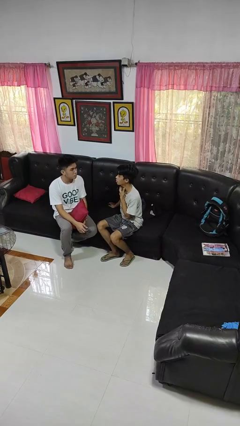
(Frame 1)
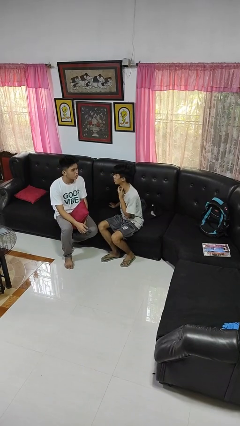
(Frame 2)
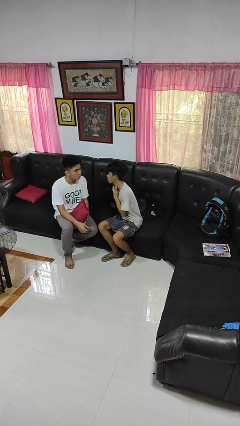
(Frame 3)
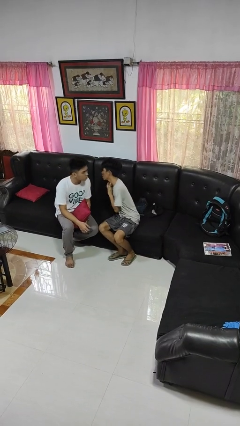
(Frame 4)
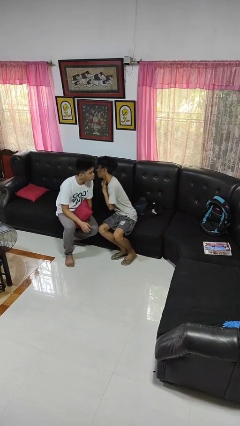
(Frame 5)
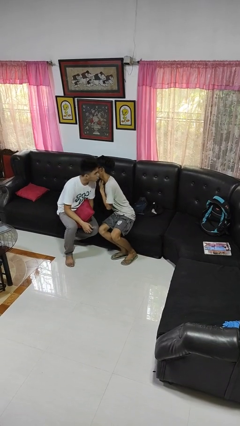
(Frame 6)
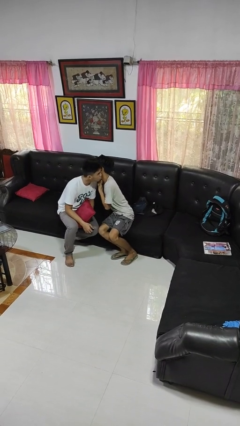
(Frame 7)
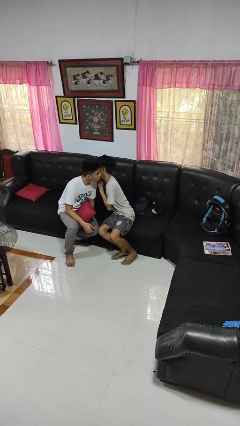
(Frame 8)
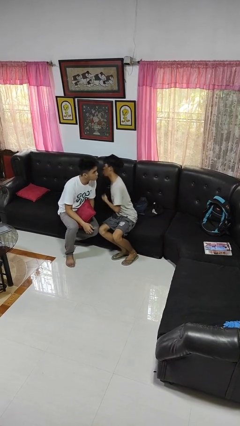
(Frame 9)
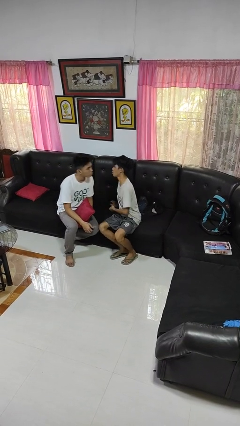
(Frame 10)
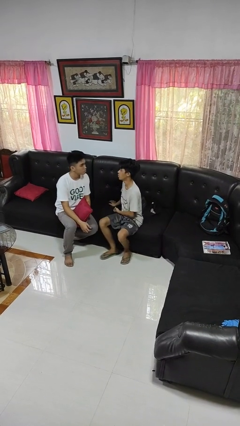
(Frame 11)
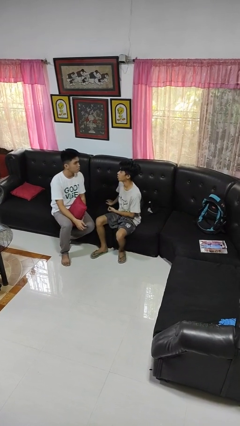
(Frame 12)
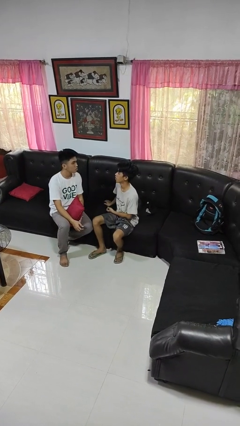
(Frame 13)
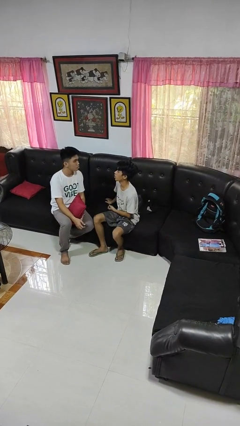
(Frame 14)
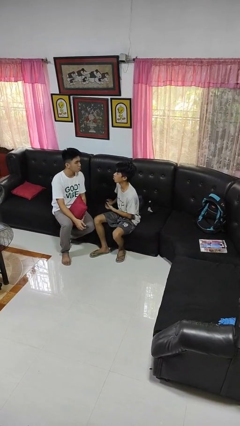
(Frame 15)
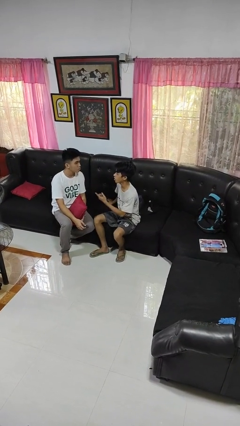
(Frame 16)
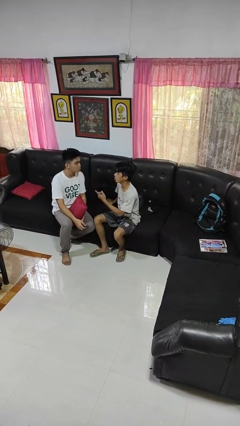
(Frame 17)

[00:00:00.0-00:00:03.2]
person kisses cheek of person

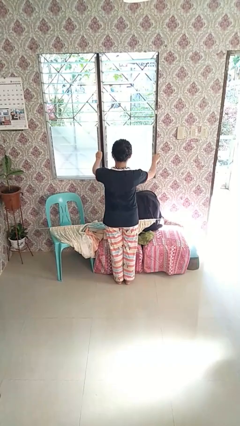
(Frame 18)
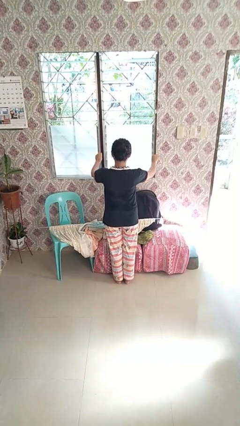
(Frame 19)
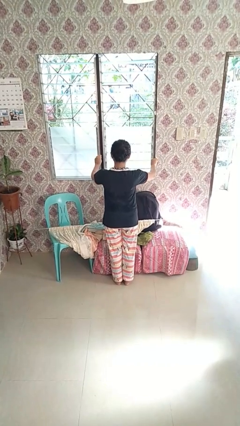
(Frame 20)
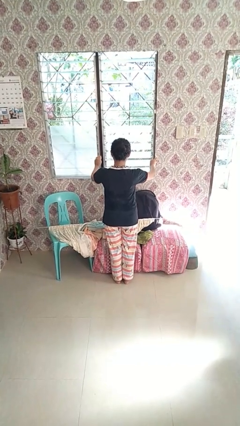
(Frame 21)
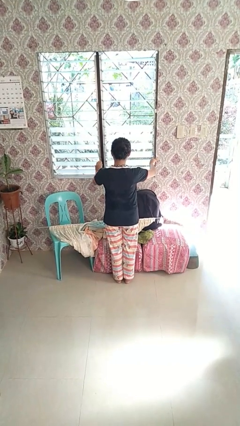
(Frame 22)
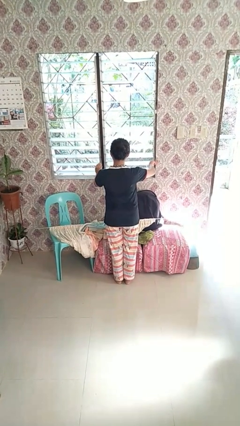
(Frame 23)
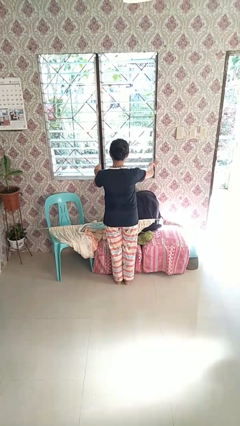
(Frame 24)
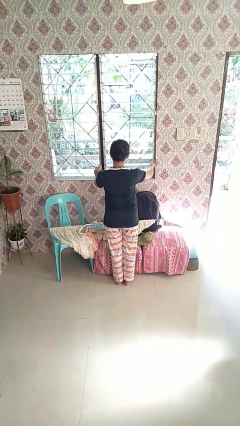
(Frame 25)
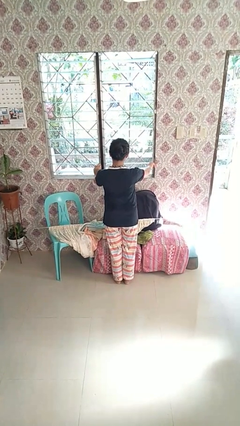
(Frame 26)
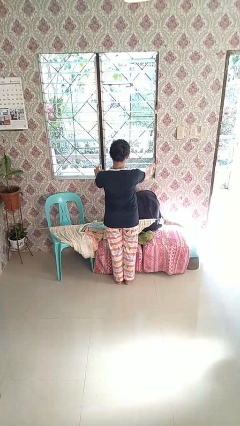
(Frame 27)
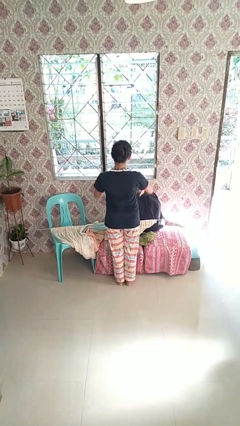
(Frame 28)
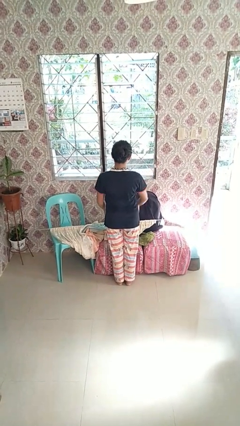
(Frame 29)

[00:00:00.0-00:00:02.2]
person opens home window

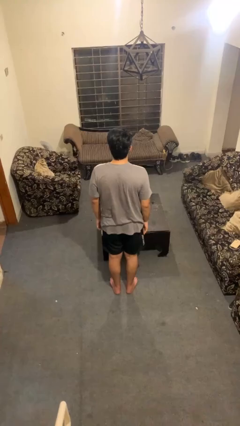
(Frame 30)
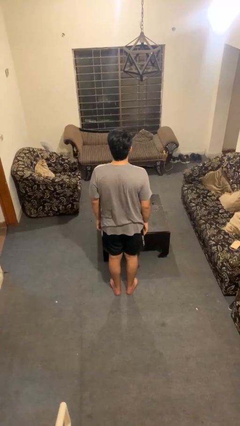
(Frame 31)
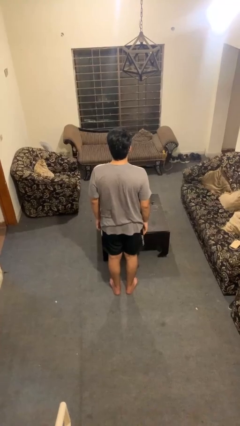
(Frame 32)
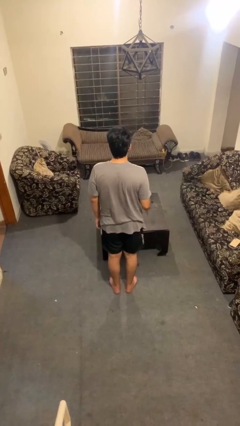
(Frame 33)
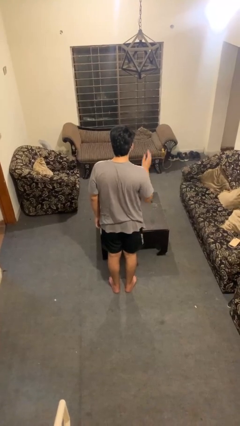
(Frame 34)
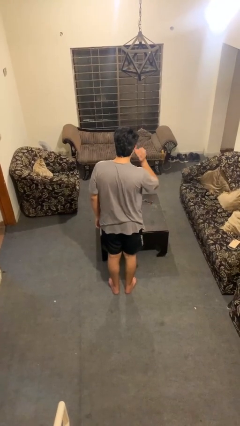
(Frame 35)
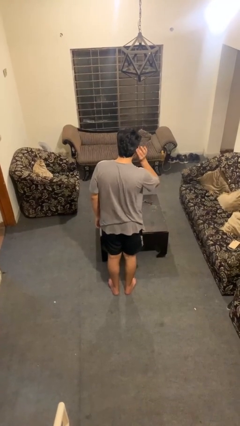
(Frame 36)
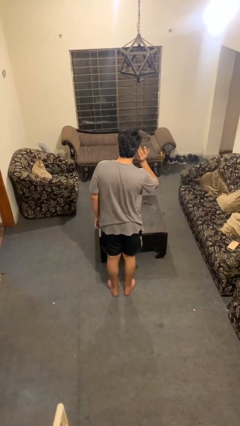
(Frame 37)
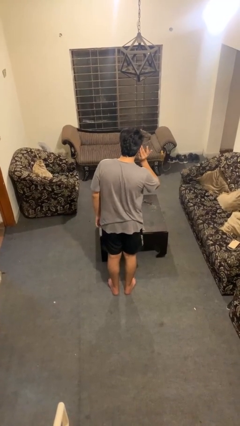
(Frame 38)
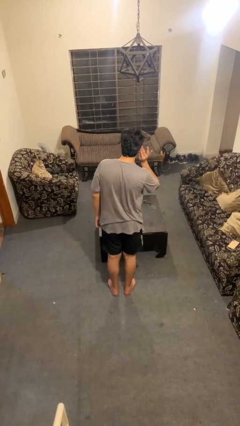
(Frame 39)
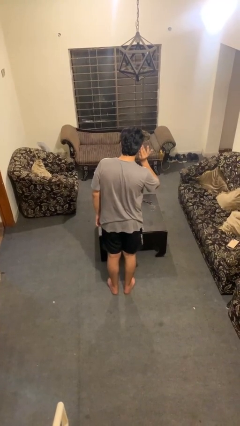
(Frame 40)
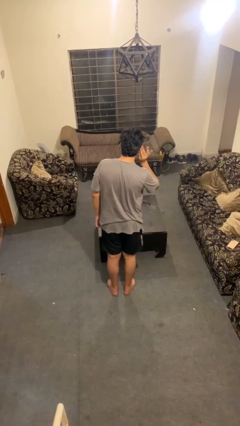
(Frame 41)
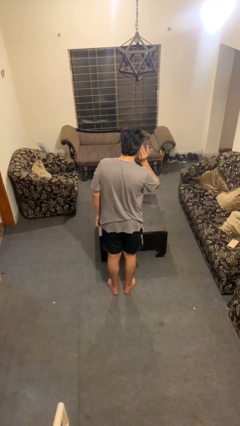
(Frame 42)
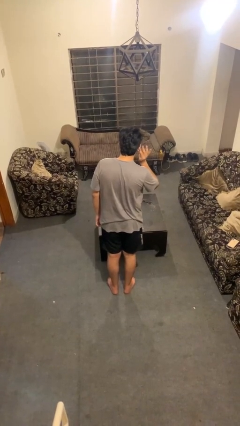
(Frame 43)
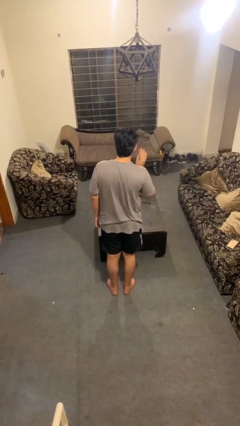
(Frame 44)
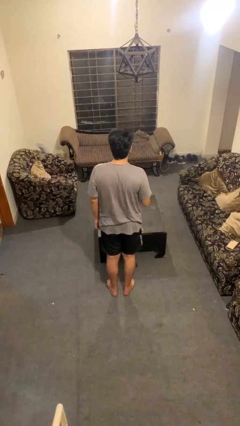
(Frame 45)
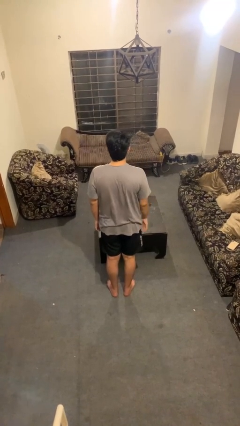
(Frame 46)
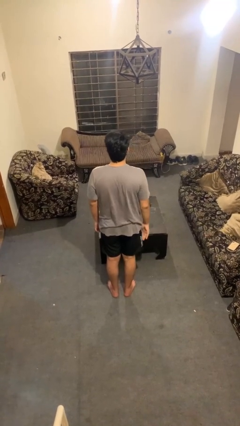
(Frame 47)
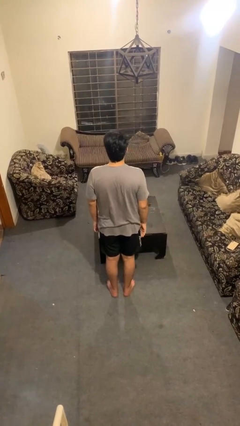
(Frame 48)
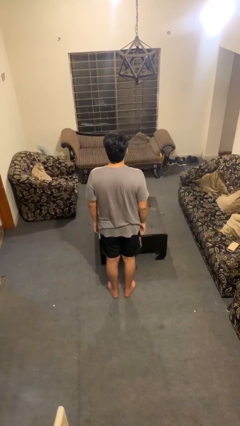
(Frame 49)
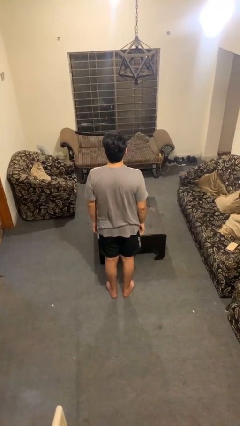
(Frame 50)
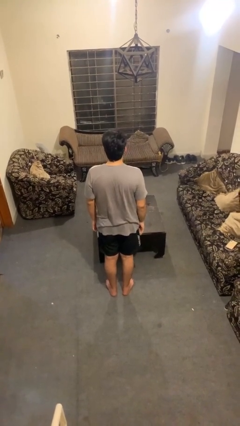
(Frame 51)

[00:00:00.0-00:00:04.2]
person gestures listen closely

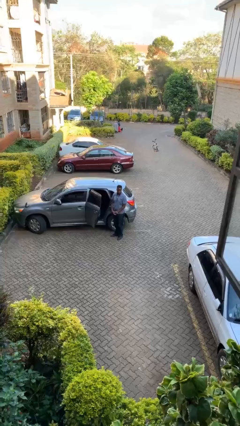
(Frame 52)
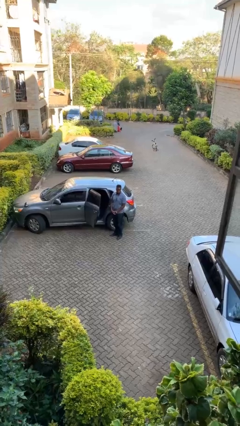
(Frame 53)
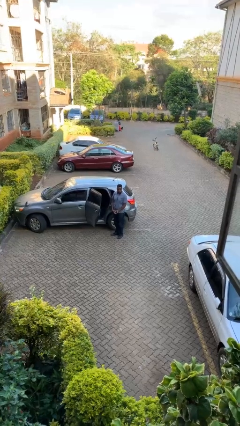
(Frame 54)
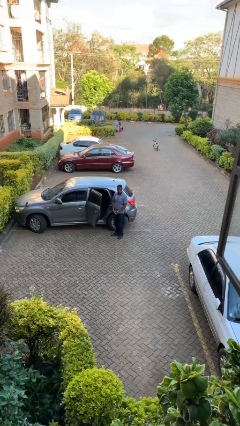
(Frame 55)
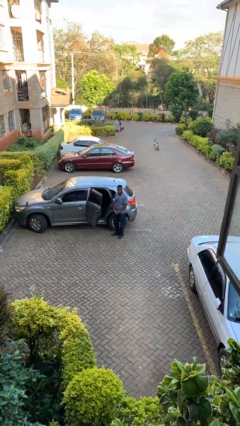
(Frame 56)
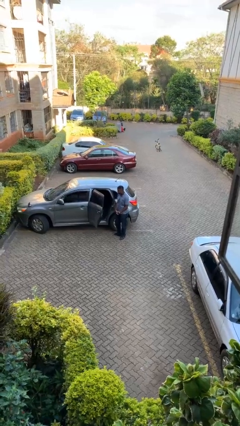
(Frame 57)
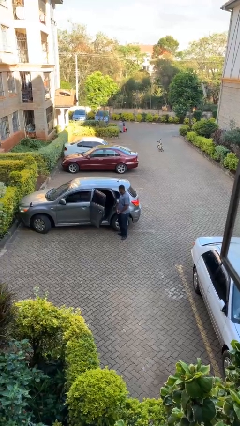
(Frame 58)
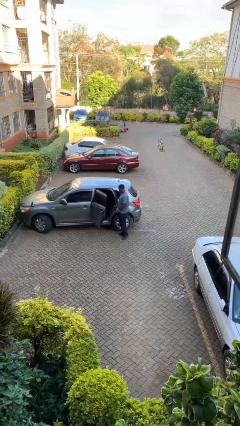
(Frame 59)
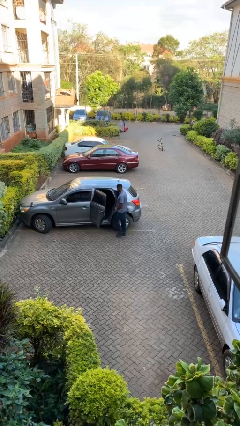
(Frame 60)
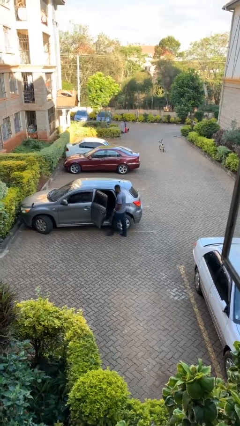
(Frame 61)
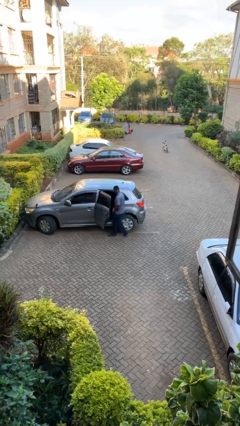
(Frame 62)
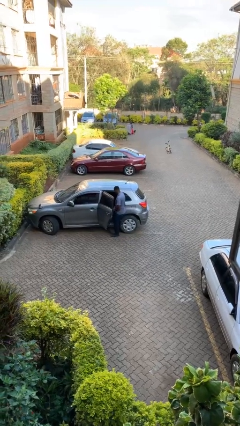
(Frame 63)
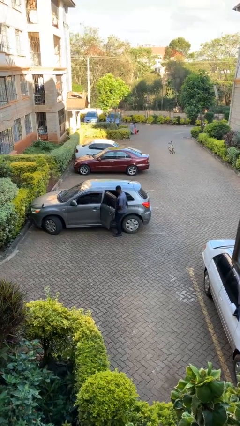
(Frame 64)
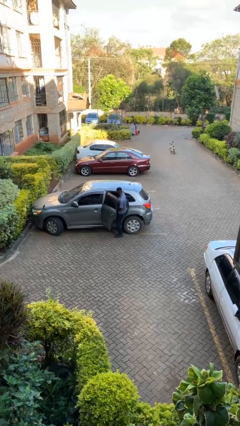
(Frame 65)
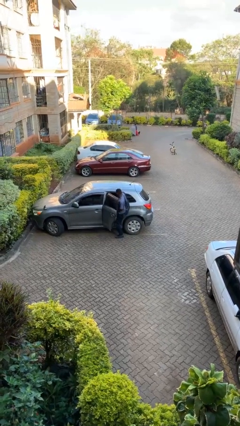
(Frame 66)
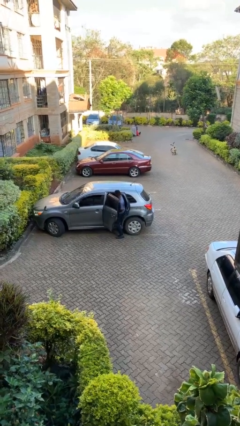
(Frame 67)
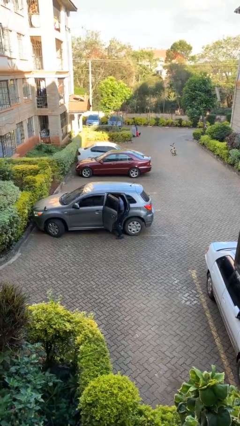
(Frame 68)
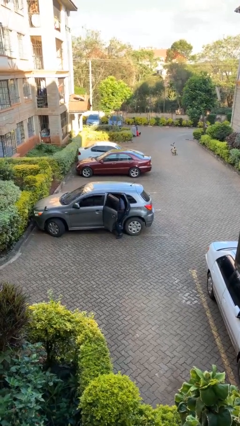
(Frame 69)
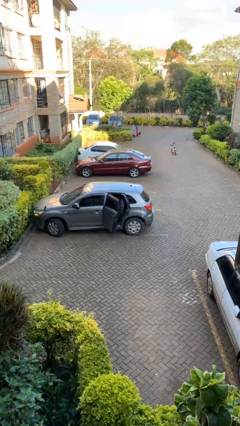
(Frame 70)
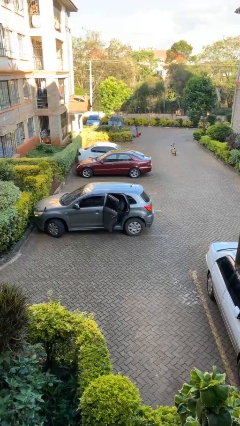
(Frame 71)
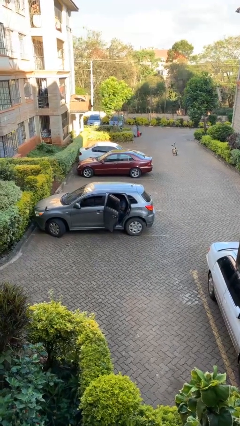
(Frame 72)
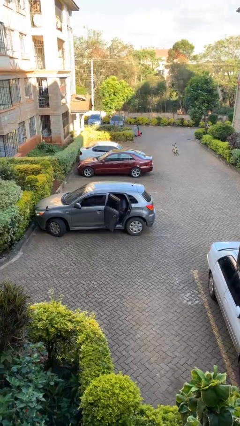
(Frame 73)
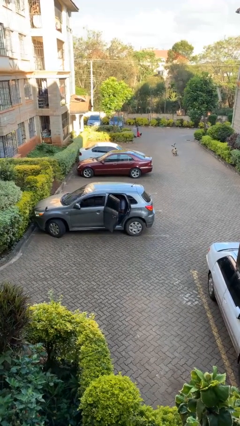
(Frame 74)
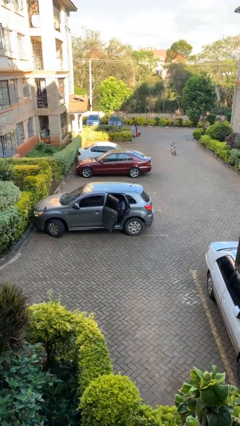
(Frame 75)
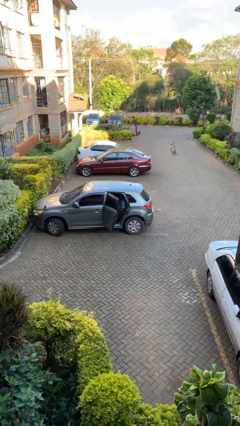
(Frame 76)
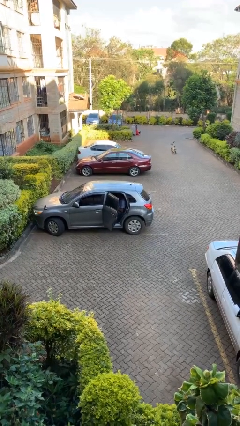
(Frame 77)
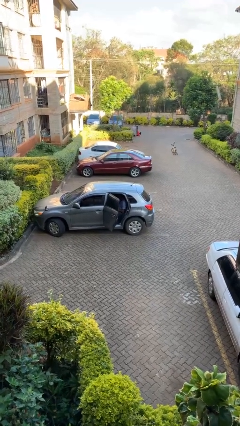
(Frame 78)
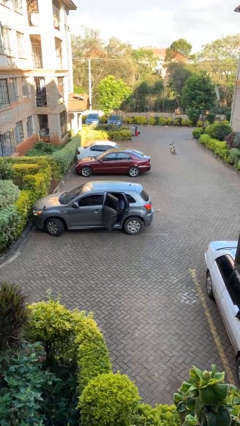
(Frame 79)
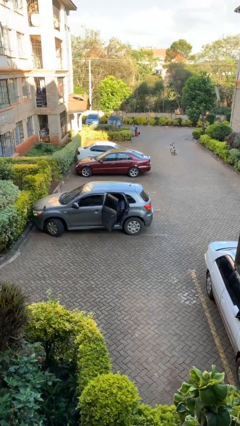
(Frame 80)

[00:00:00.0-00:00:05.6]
person enters car

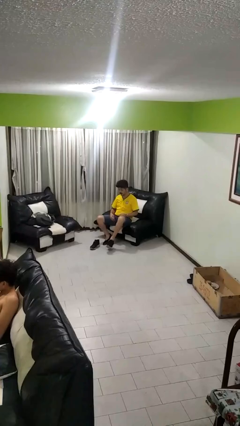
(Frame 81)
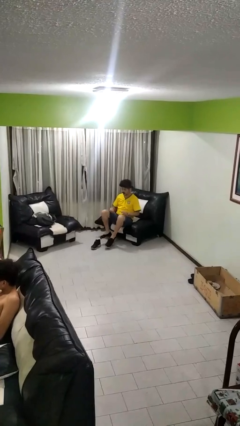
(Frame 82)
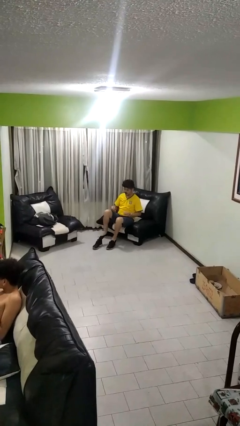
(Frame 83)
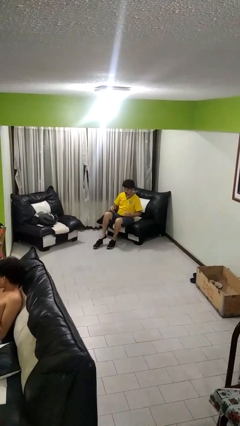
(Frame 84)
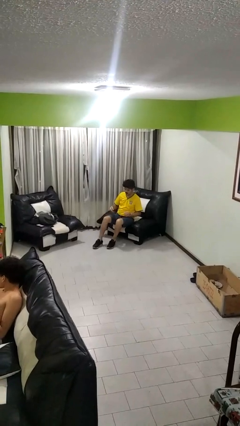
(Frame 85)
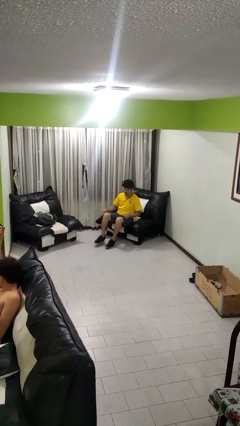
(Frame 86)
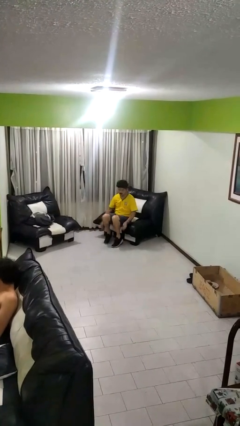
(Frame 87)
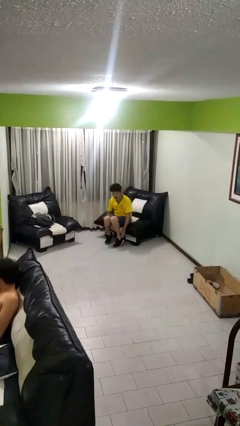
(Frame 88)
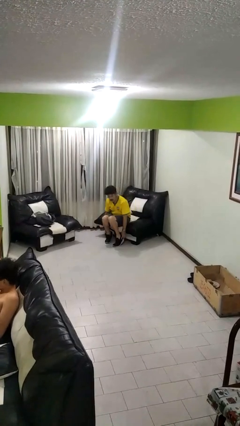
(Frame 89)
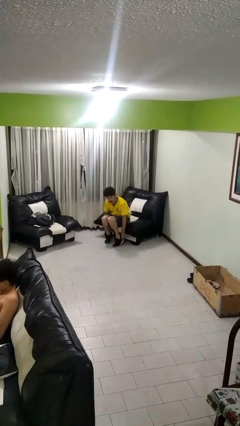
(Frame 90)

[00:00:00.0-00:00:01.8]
person puts on shoes

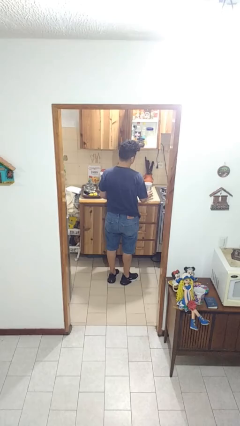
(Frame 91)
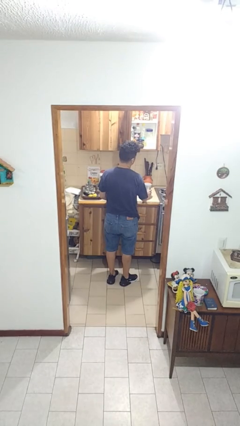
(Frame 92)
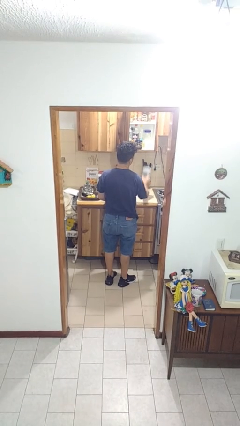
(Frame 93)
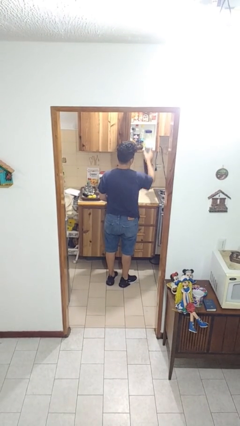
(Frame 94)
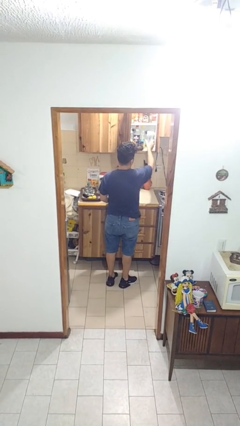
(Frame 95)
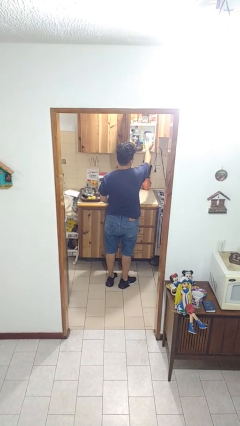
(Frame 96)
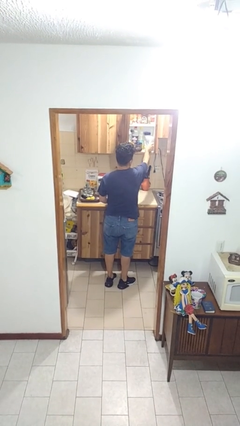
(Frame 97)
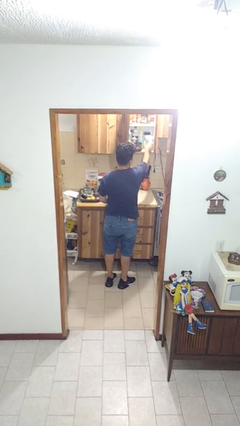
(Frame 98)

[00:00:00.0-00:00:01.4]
person puts object in cabinet
